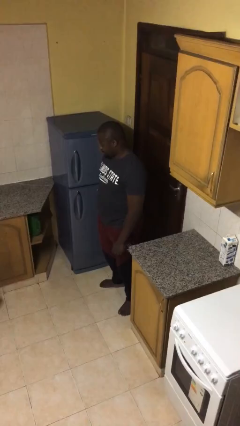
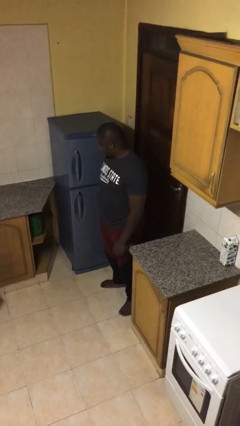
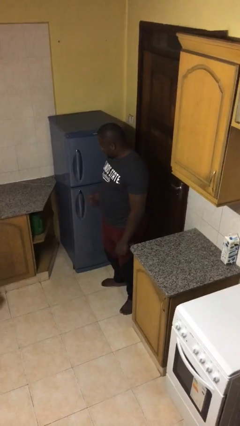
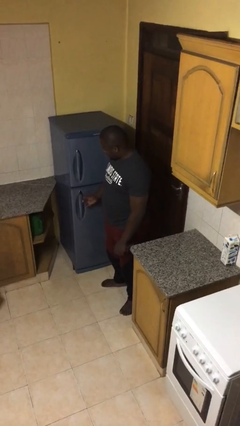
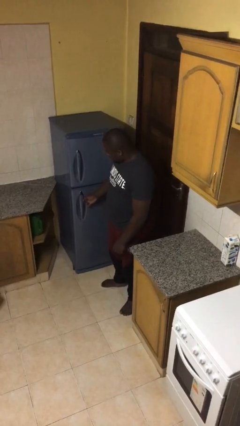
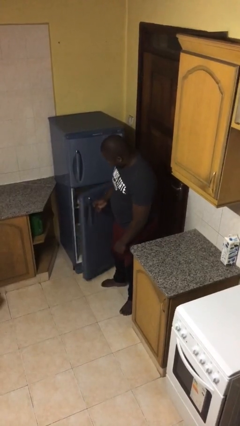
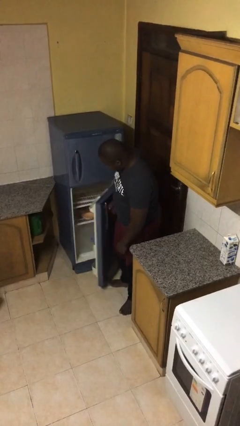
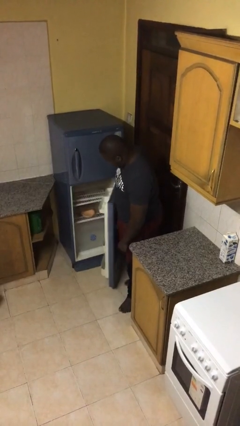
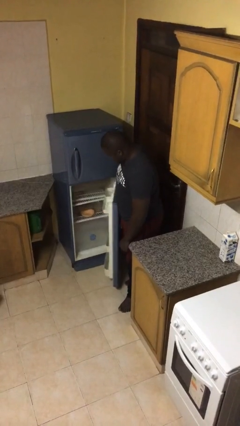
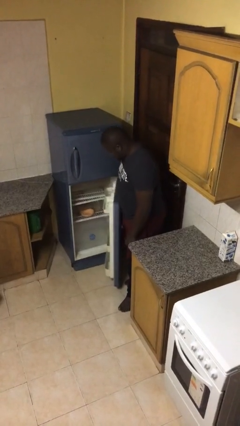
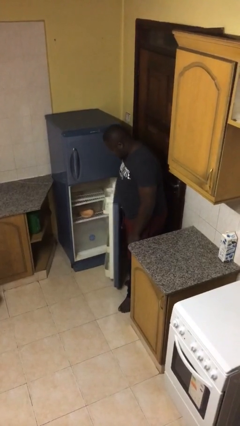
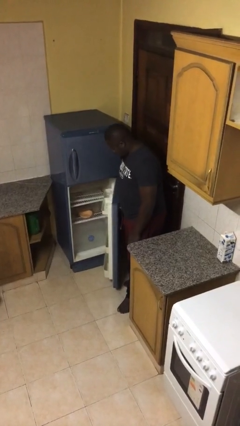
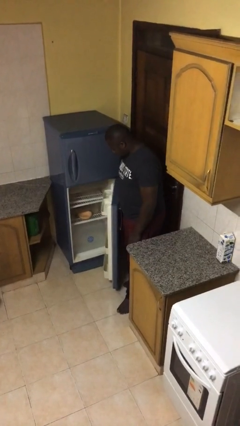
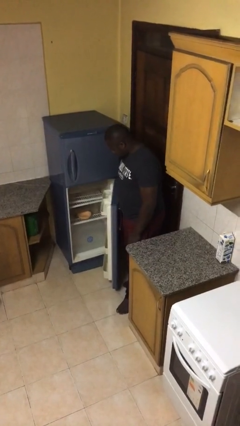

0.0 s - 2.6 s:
person opens refrigerator

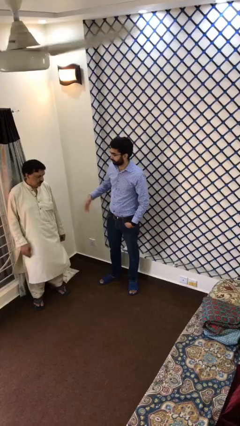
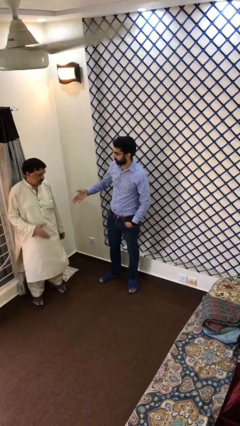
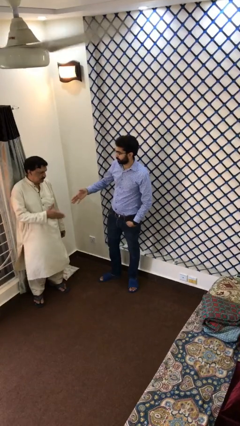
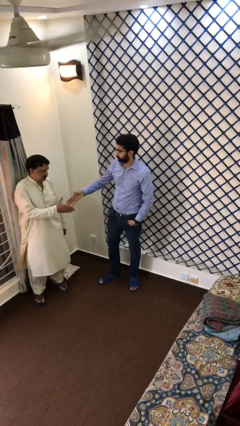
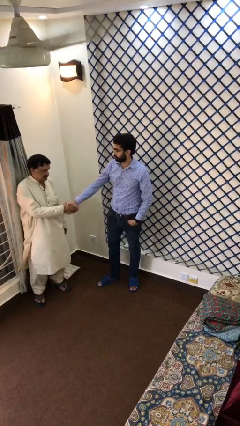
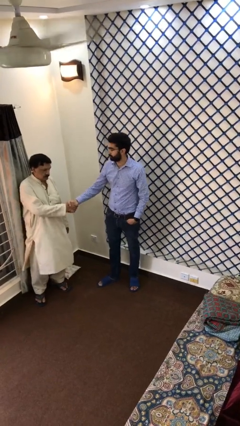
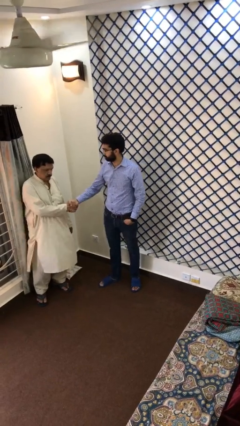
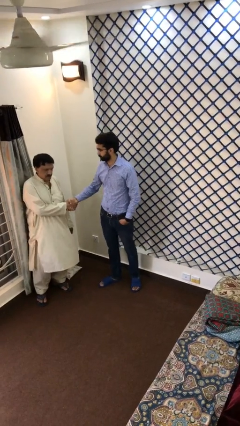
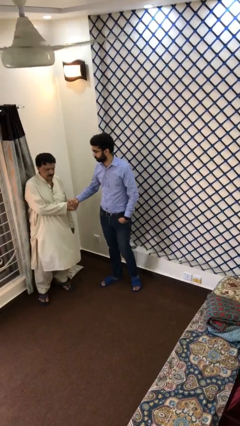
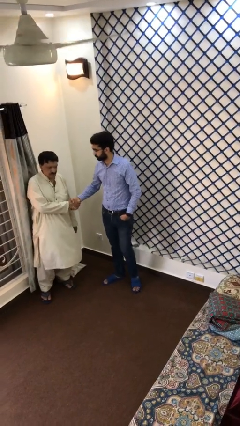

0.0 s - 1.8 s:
person shakes hand

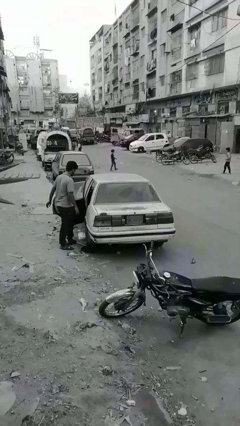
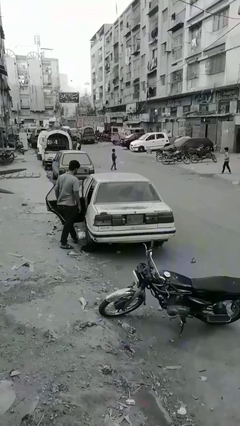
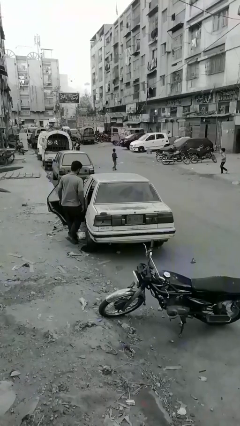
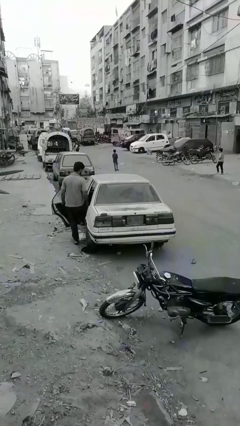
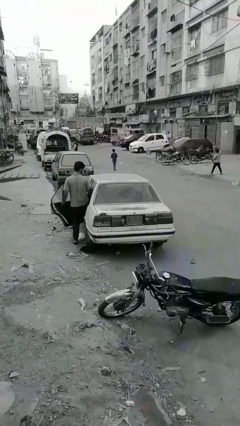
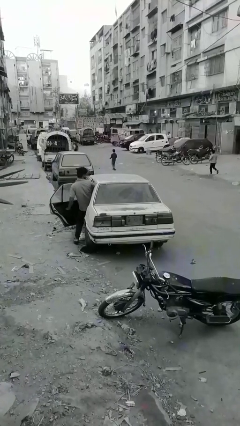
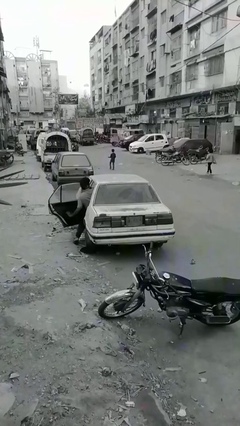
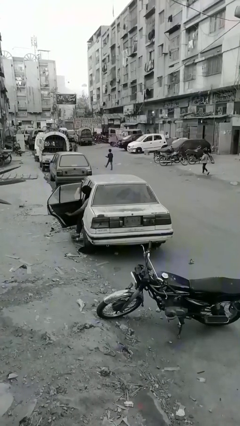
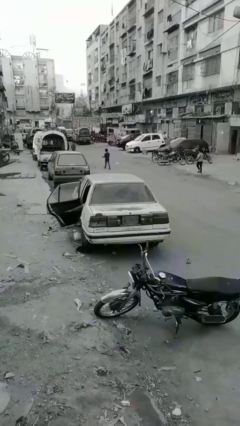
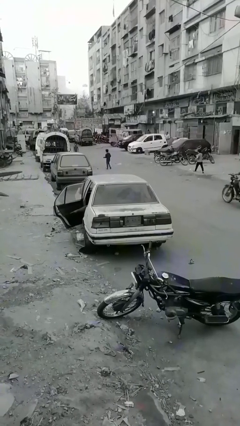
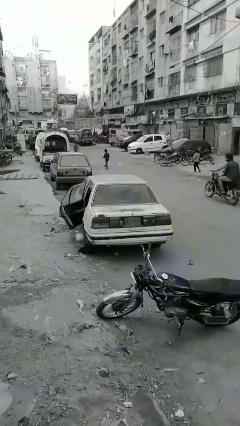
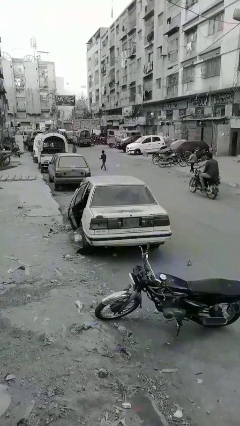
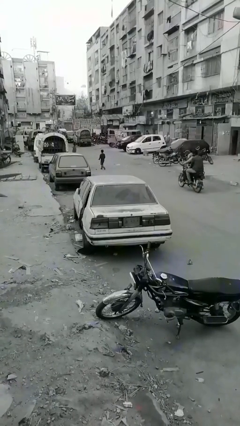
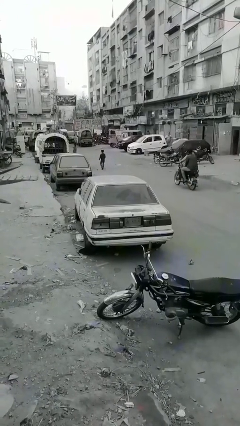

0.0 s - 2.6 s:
car picks up person

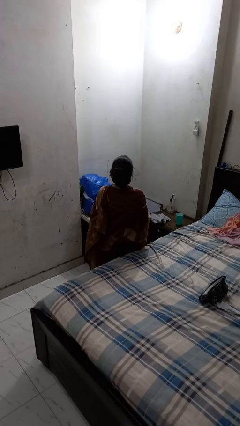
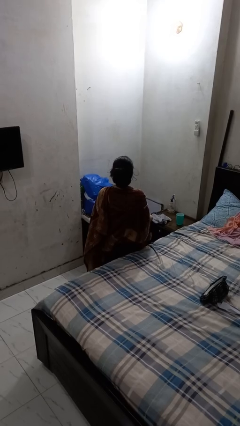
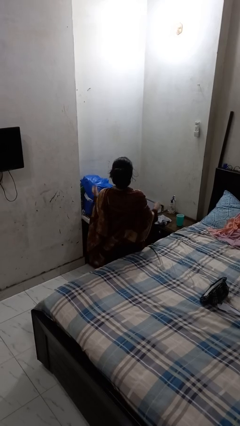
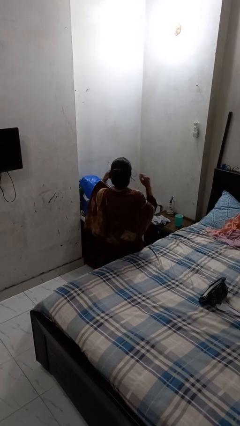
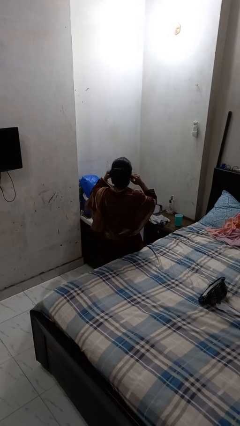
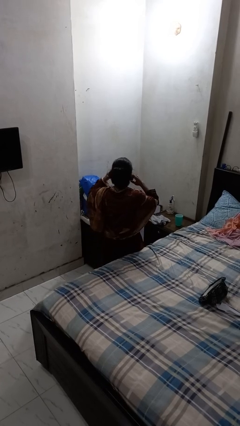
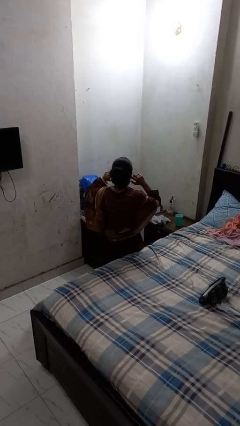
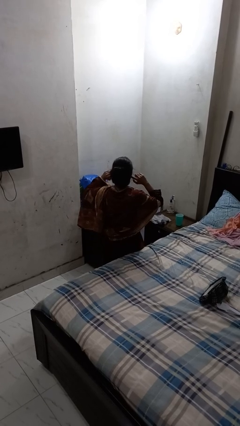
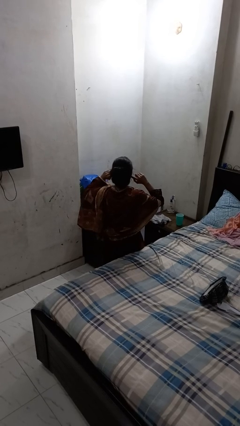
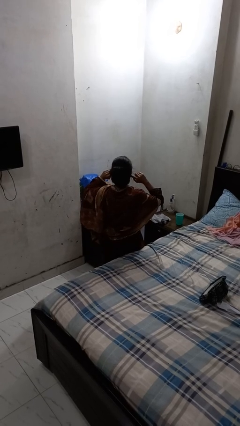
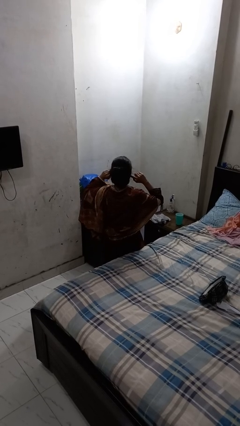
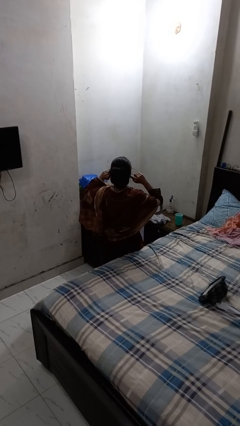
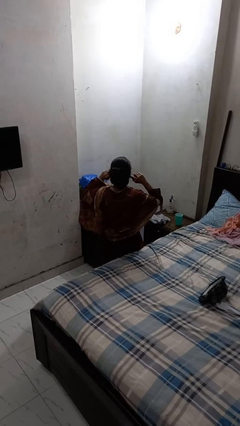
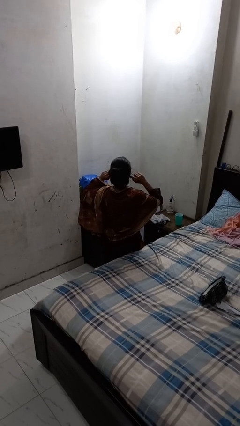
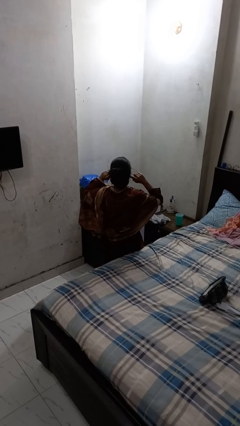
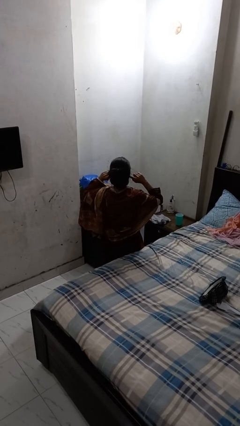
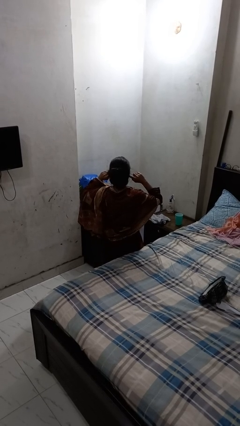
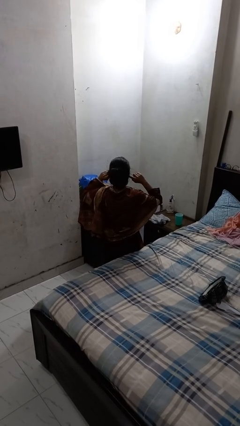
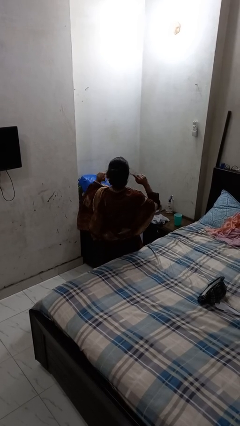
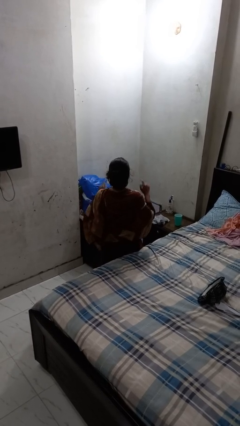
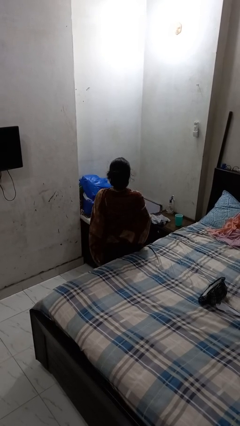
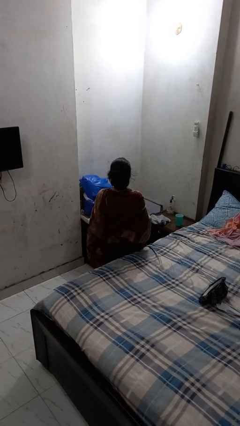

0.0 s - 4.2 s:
person puts fingers in ear

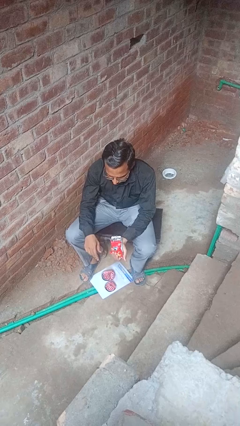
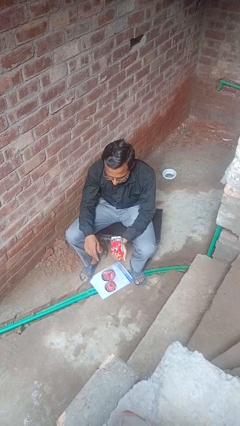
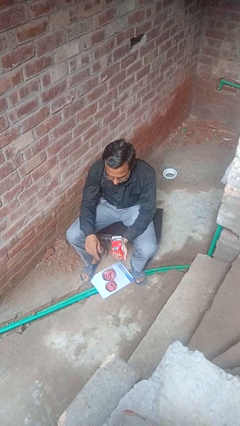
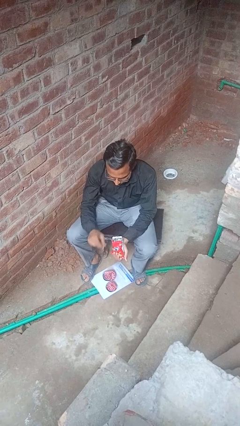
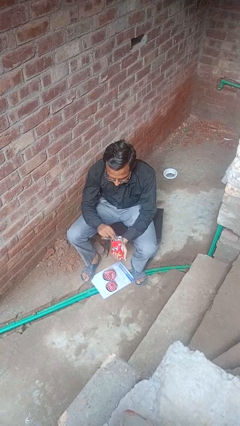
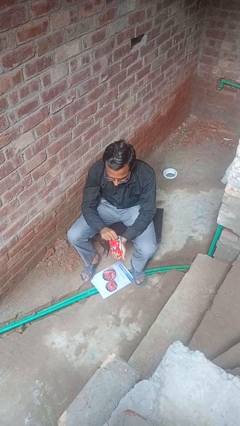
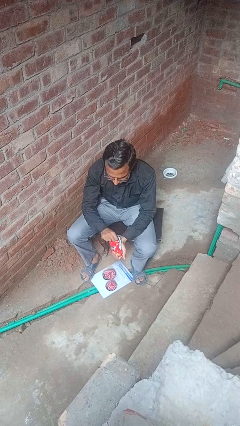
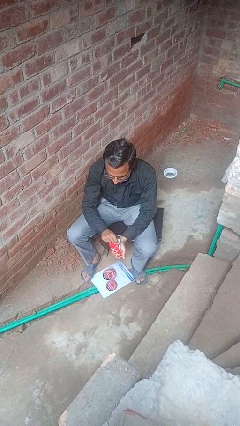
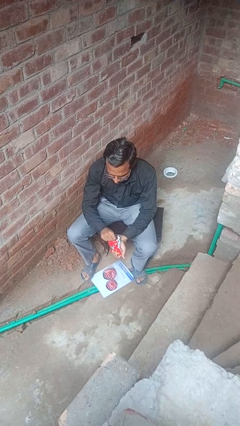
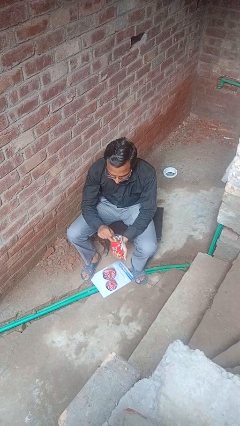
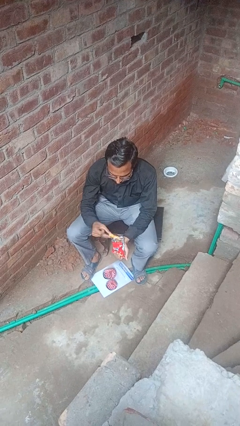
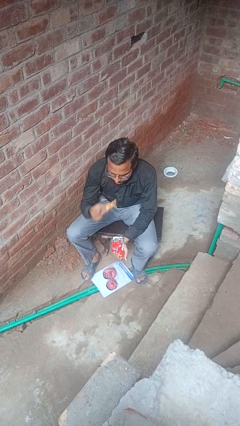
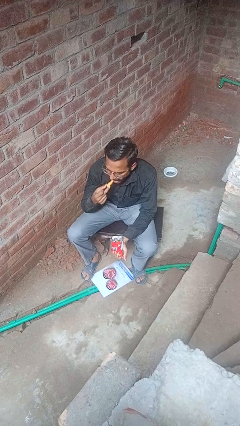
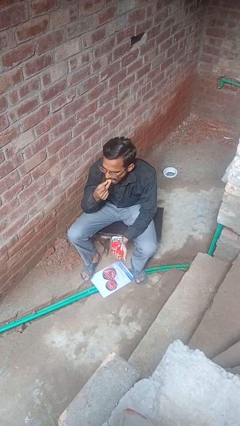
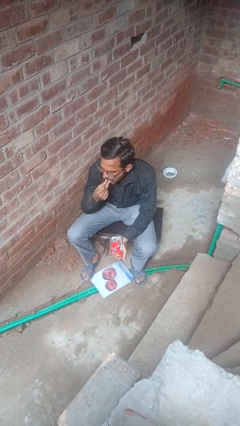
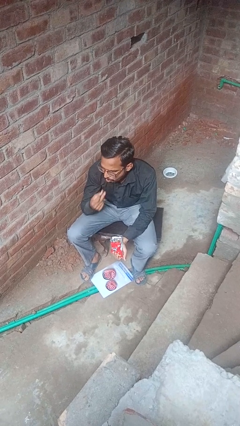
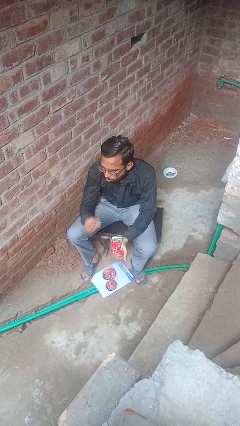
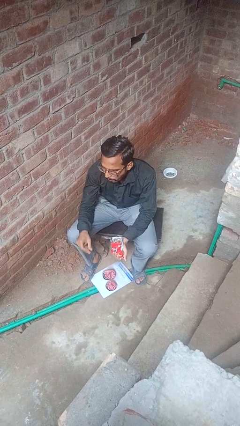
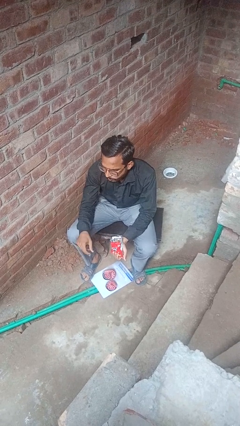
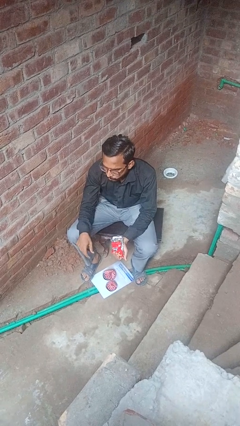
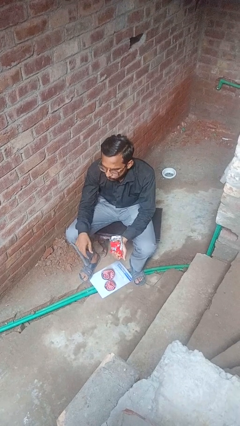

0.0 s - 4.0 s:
person eats snack from bag

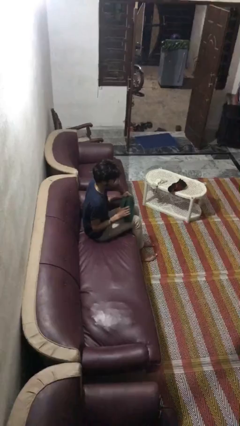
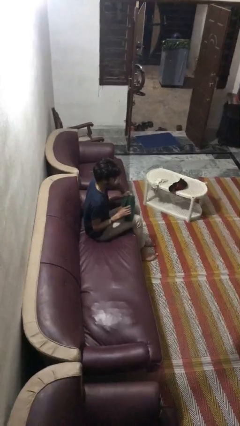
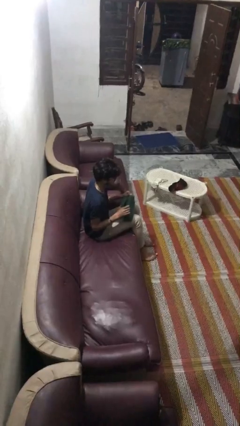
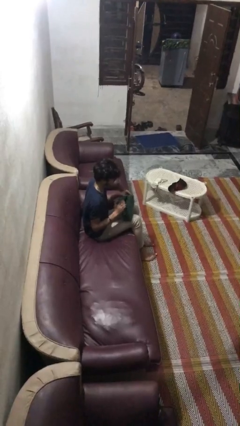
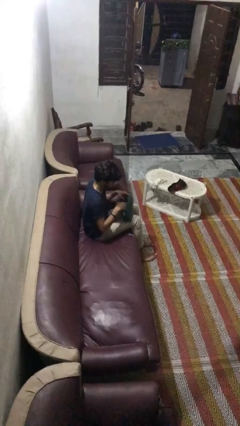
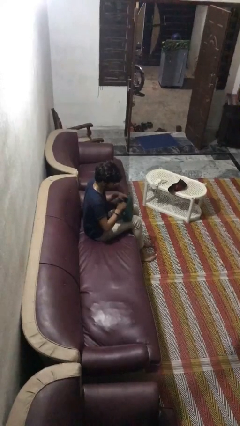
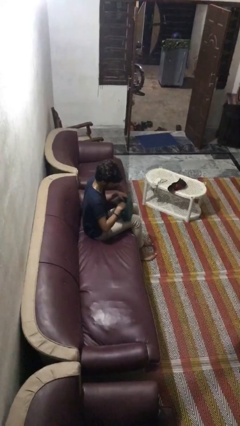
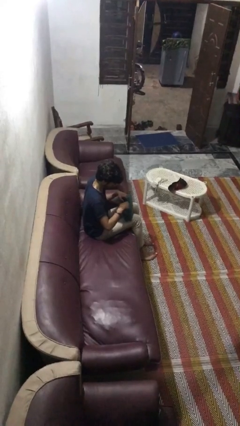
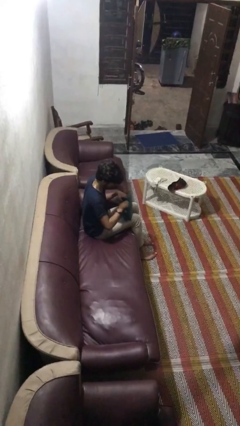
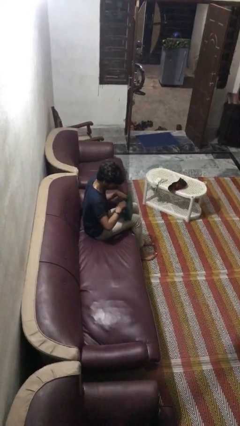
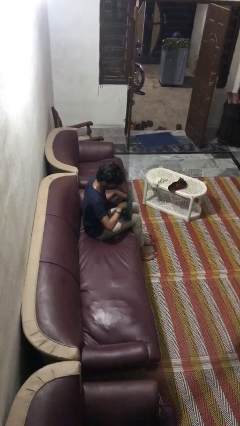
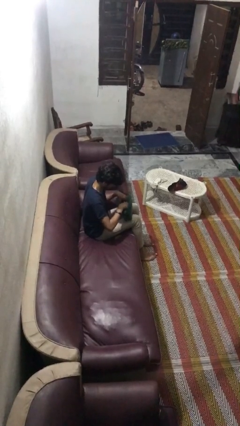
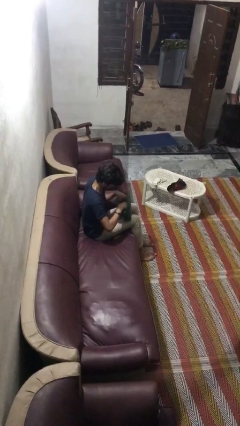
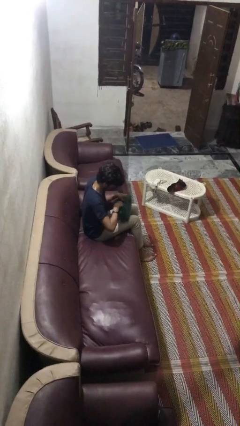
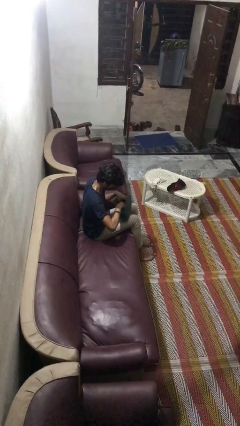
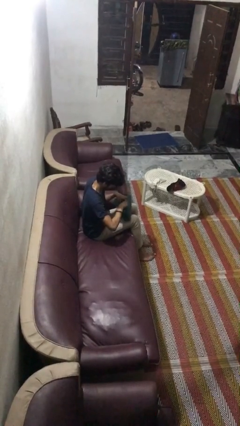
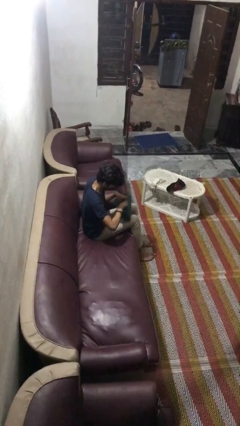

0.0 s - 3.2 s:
person searches in purse
